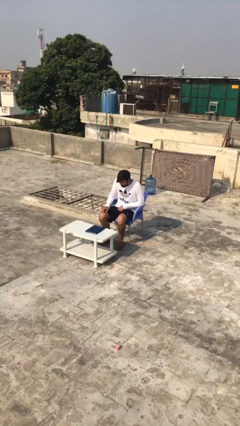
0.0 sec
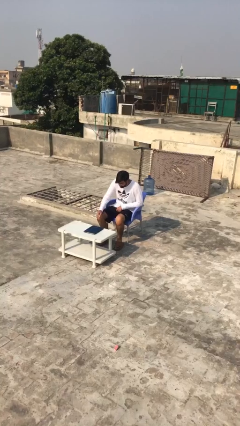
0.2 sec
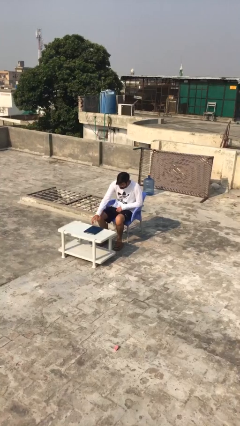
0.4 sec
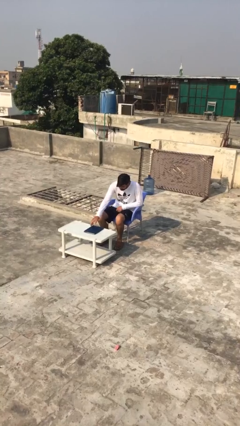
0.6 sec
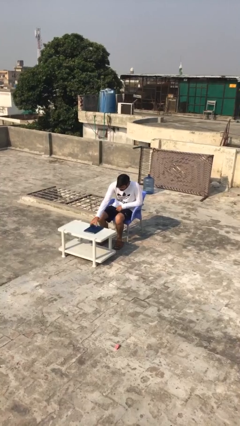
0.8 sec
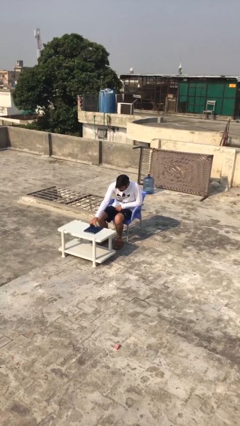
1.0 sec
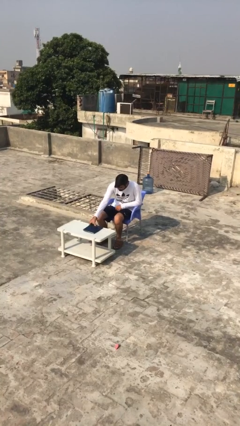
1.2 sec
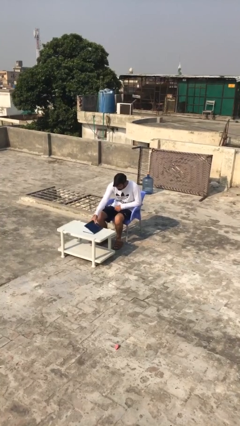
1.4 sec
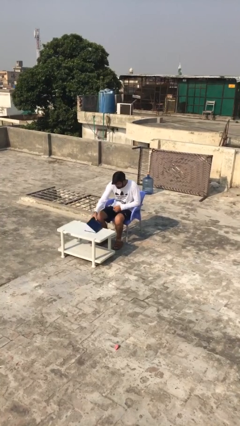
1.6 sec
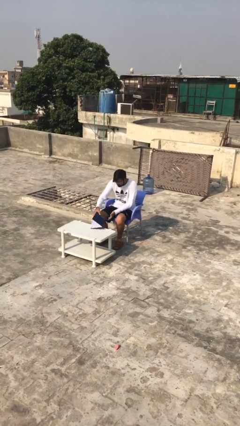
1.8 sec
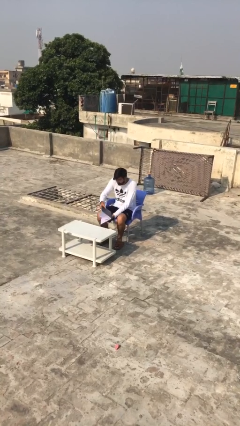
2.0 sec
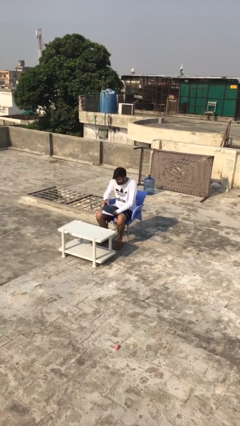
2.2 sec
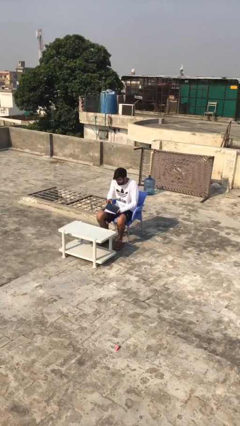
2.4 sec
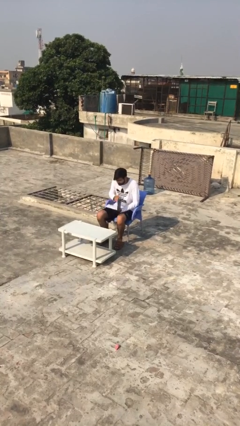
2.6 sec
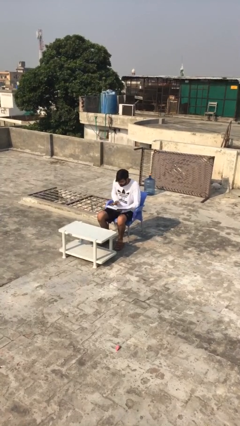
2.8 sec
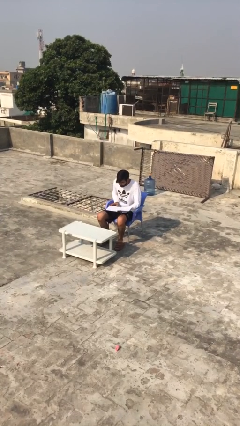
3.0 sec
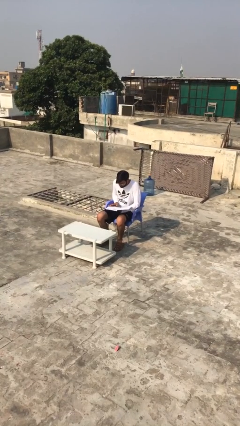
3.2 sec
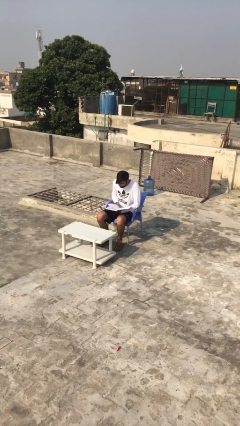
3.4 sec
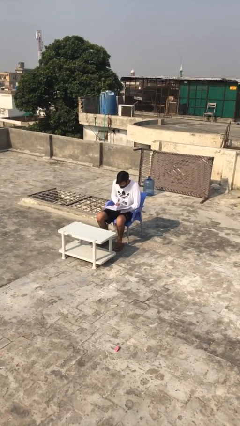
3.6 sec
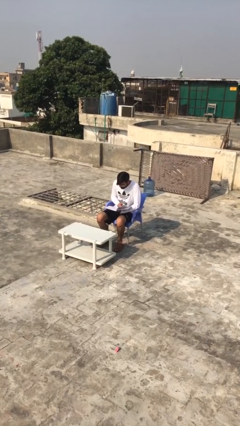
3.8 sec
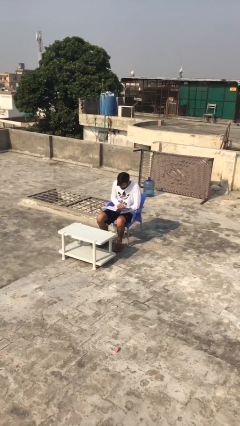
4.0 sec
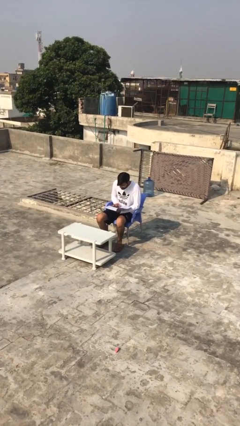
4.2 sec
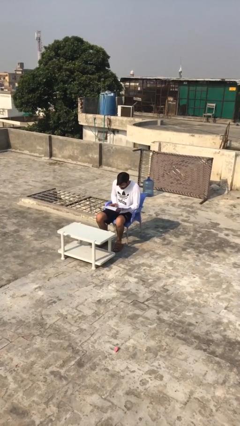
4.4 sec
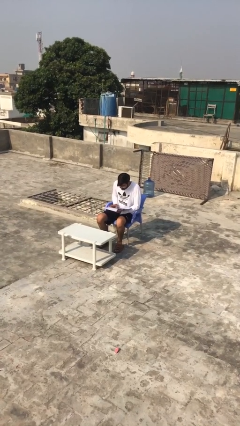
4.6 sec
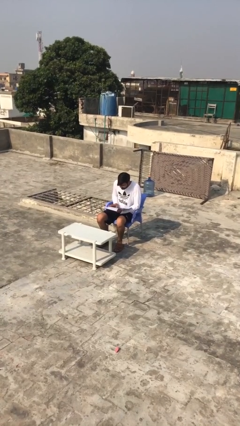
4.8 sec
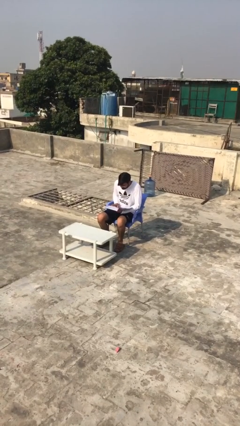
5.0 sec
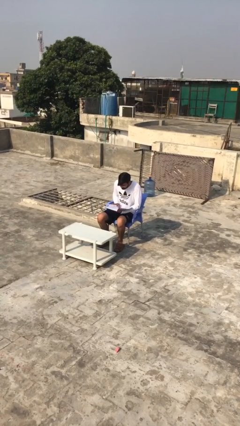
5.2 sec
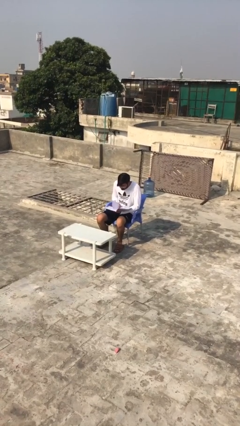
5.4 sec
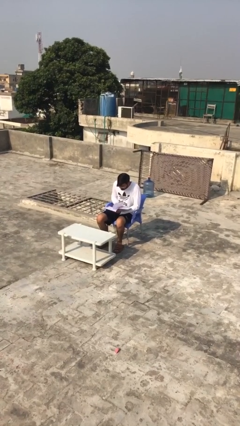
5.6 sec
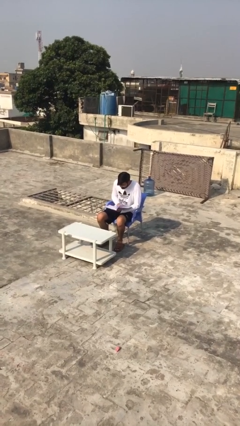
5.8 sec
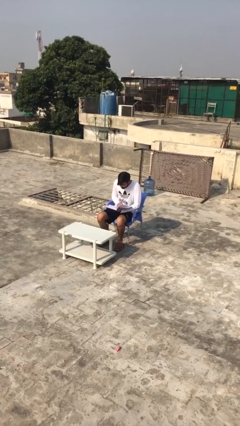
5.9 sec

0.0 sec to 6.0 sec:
person reads document

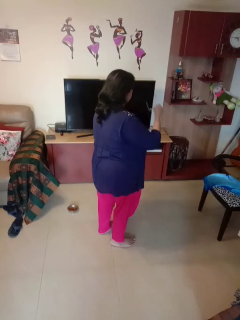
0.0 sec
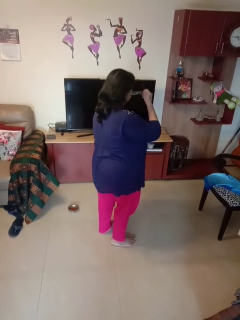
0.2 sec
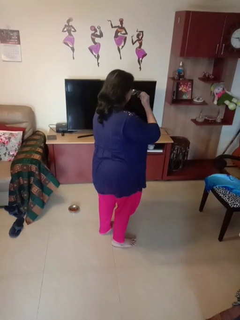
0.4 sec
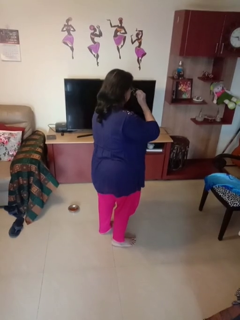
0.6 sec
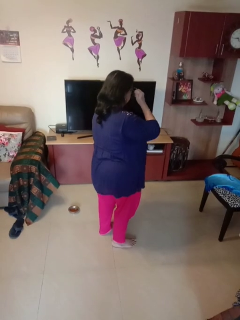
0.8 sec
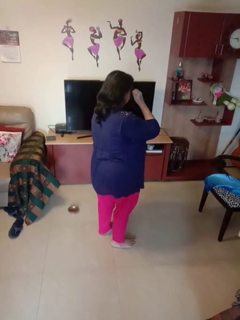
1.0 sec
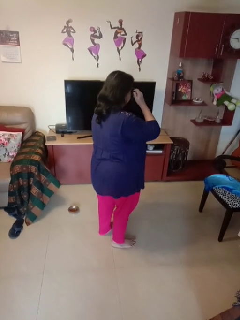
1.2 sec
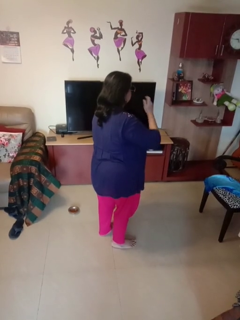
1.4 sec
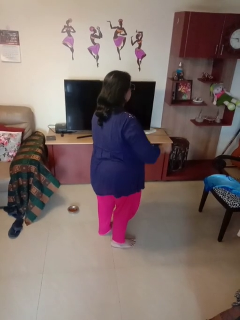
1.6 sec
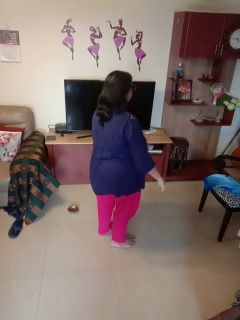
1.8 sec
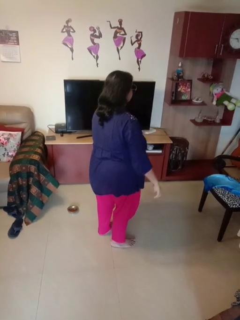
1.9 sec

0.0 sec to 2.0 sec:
person puts on sunglasses

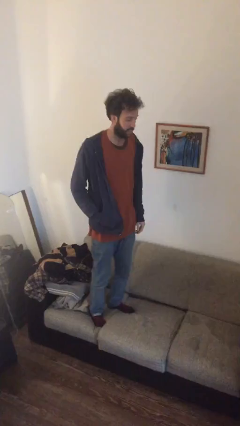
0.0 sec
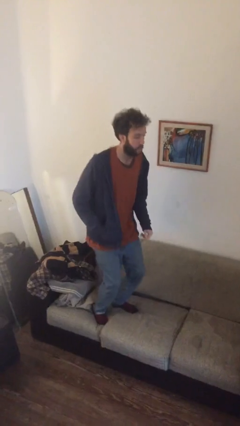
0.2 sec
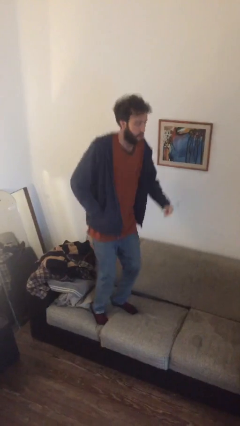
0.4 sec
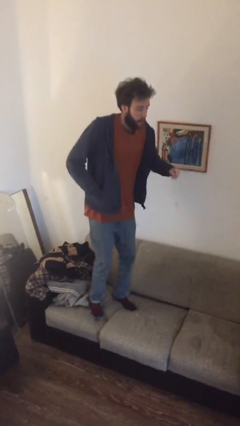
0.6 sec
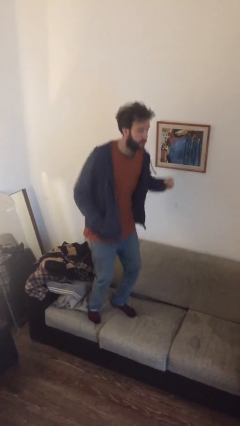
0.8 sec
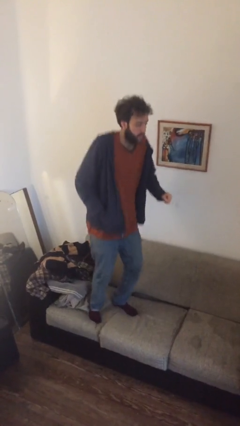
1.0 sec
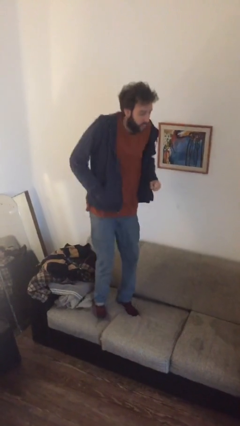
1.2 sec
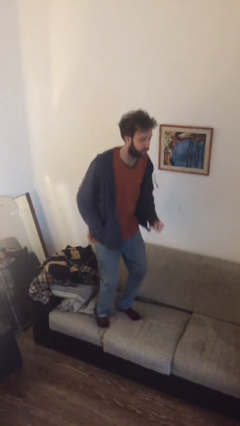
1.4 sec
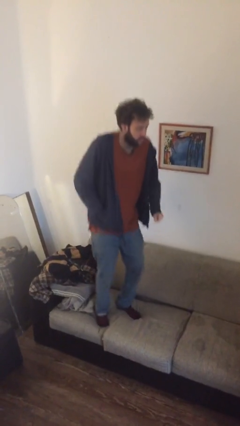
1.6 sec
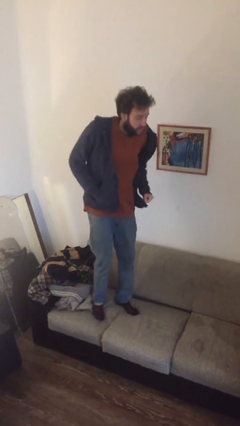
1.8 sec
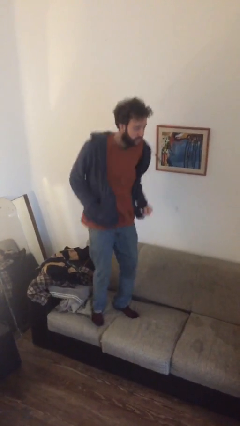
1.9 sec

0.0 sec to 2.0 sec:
person jumps on couch

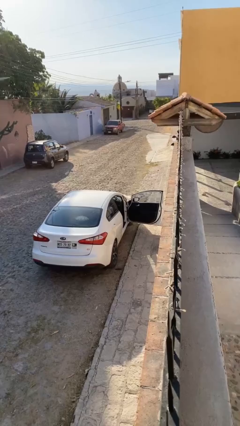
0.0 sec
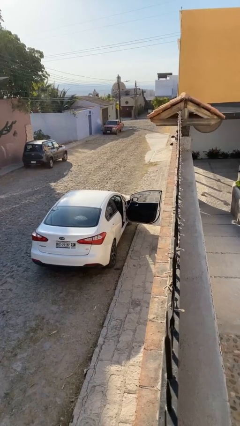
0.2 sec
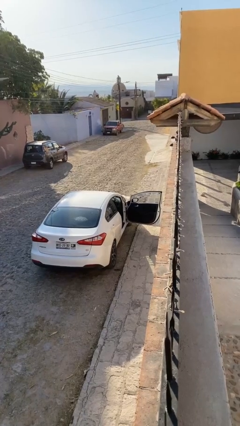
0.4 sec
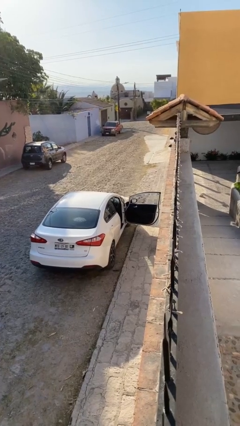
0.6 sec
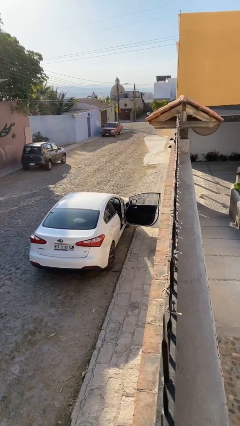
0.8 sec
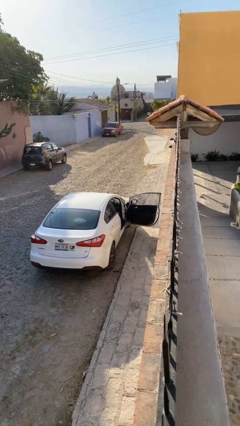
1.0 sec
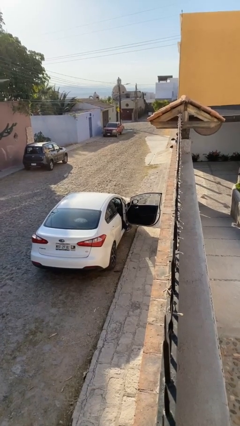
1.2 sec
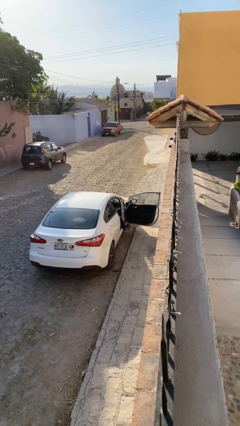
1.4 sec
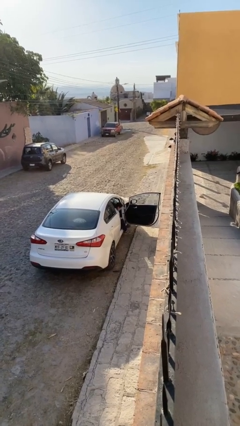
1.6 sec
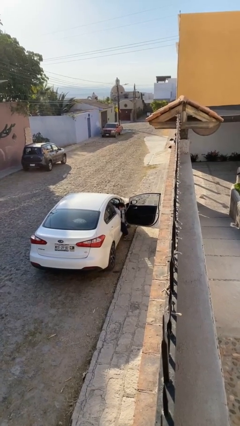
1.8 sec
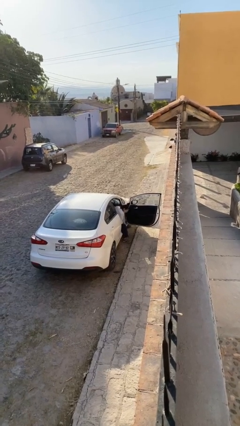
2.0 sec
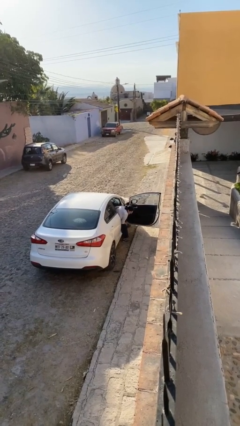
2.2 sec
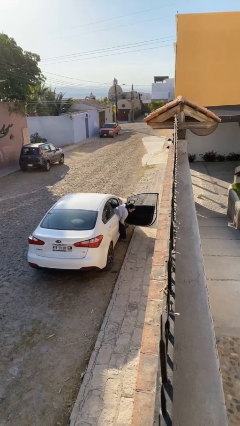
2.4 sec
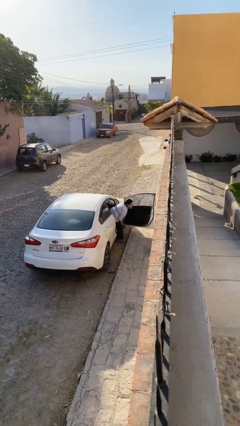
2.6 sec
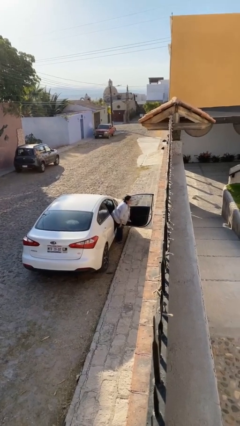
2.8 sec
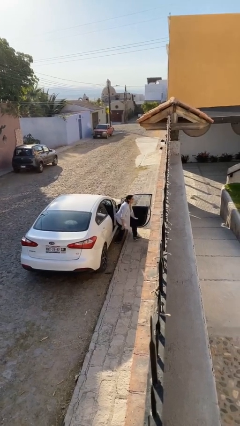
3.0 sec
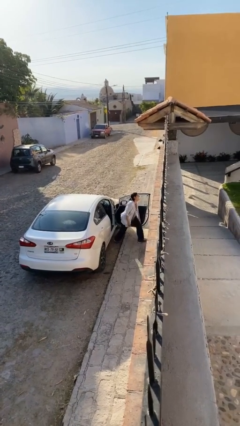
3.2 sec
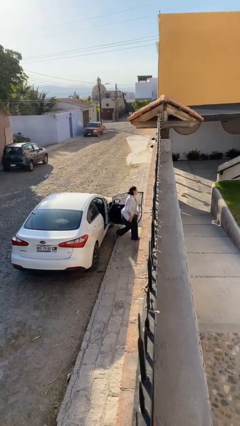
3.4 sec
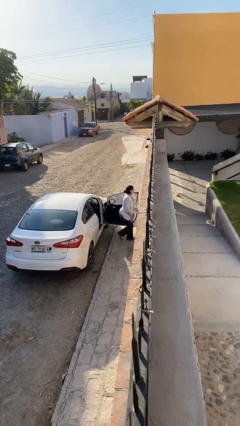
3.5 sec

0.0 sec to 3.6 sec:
person exits car

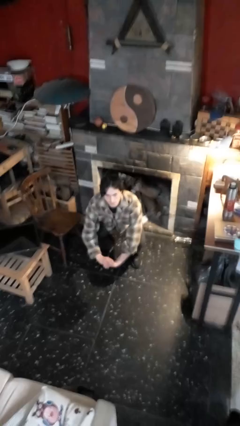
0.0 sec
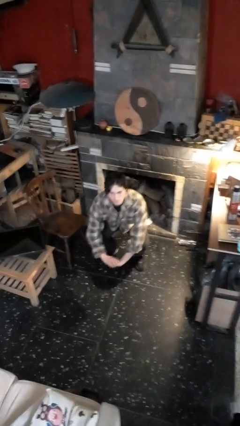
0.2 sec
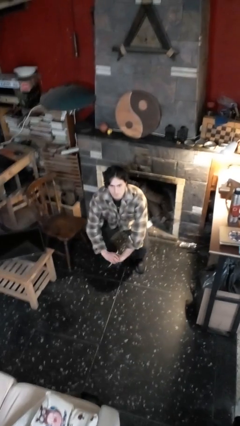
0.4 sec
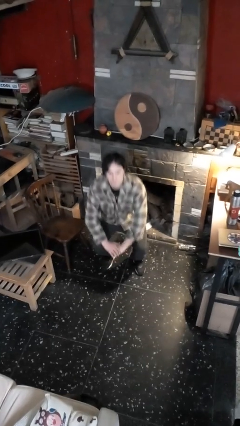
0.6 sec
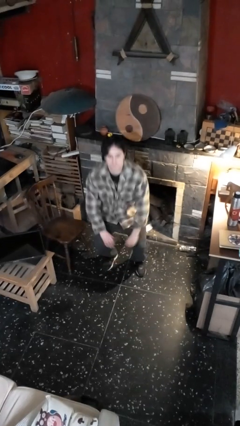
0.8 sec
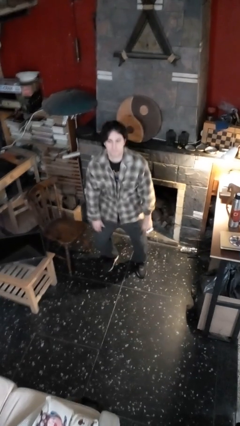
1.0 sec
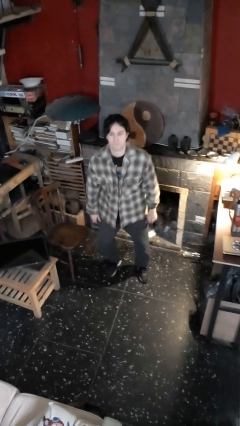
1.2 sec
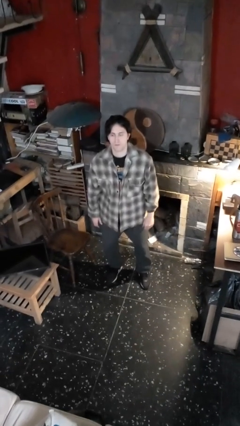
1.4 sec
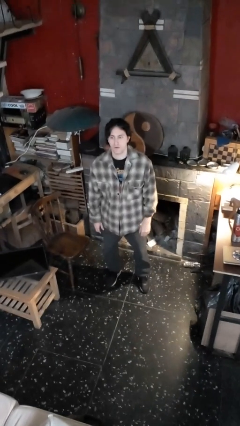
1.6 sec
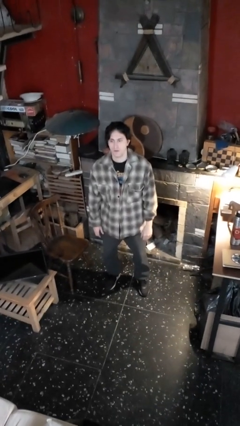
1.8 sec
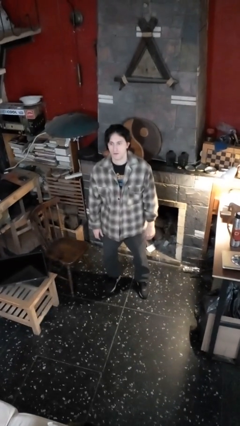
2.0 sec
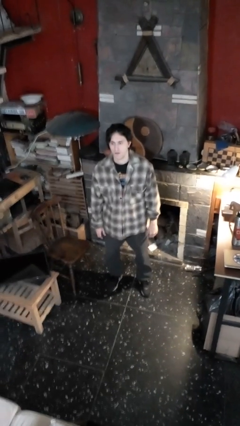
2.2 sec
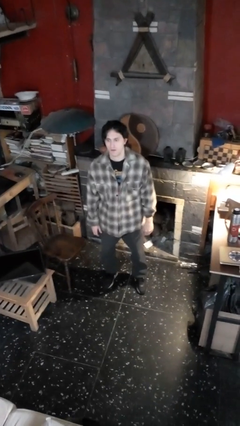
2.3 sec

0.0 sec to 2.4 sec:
person stands up

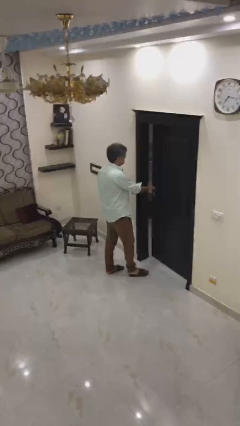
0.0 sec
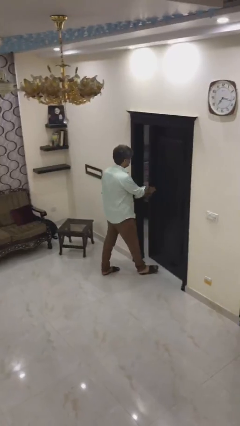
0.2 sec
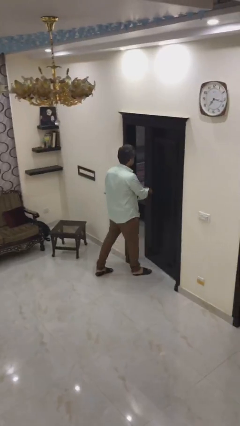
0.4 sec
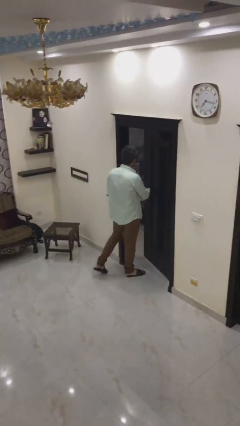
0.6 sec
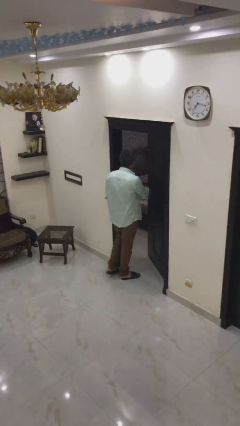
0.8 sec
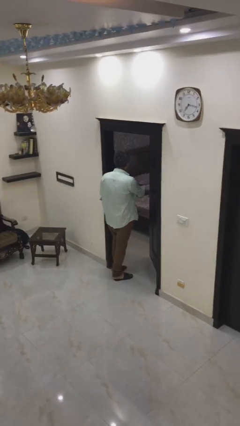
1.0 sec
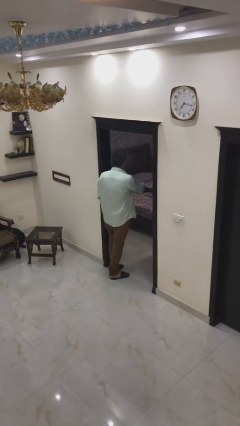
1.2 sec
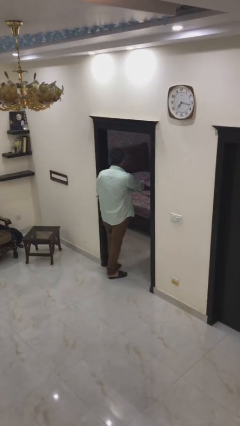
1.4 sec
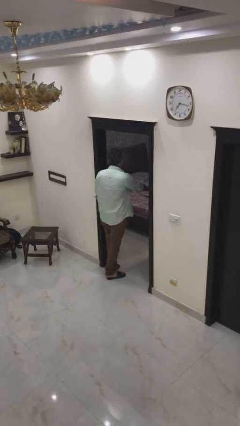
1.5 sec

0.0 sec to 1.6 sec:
person opens facility door

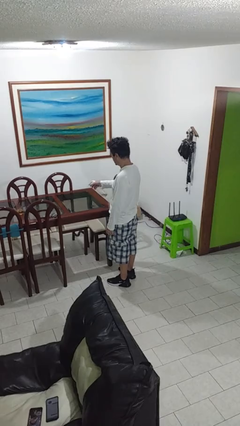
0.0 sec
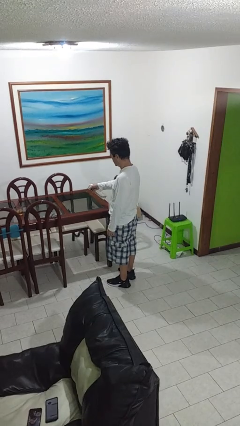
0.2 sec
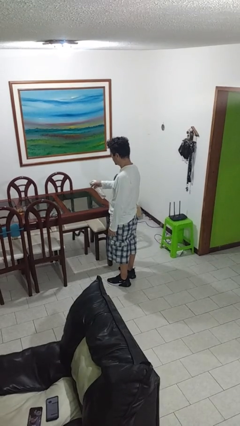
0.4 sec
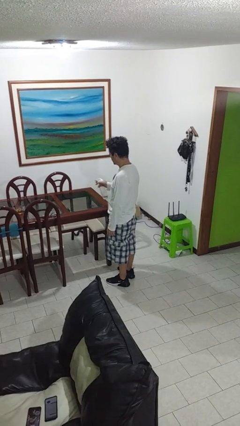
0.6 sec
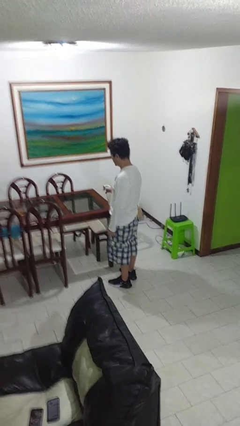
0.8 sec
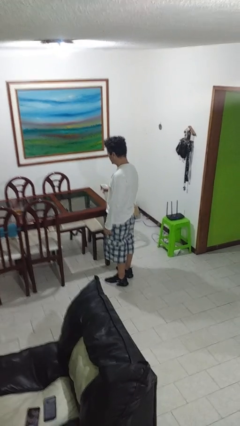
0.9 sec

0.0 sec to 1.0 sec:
person sprays from bottle
